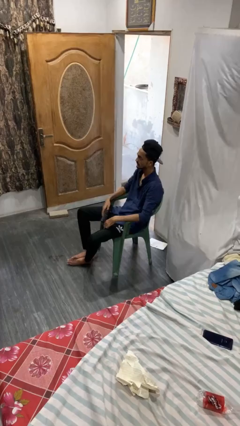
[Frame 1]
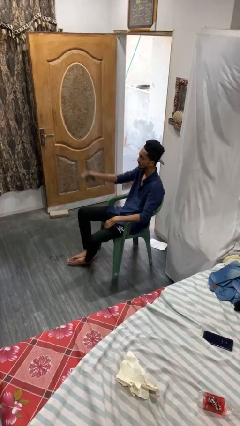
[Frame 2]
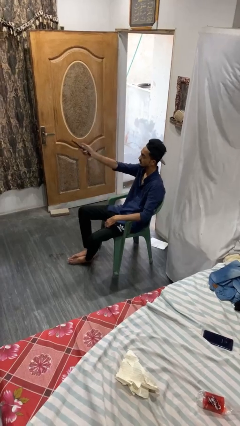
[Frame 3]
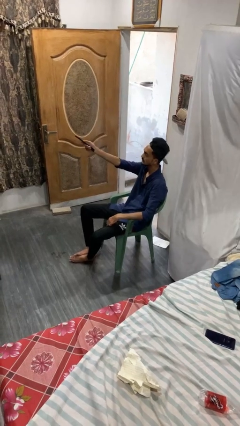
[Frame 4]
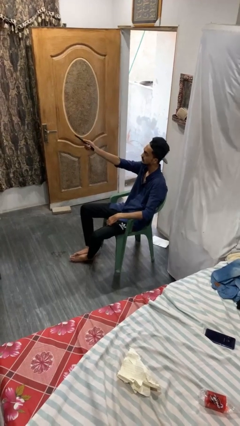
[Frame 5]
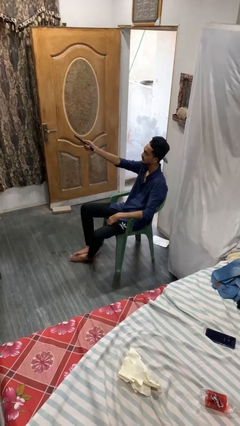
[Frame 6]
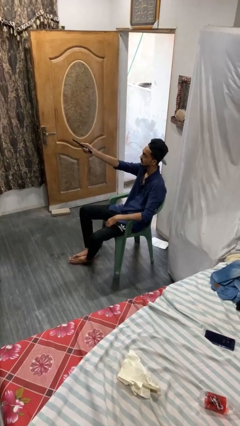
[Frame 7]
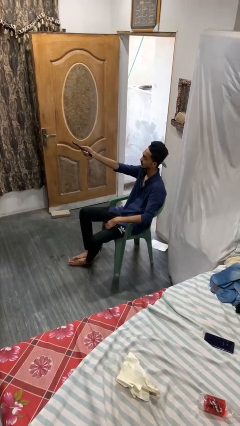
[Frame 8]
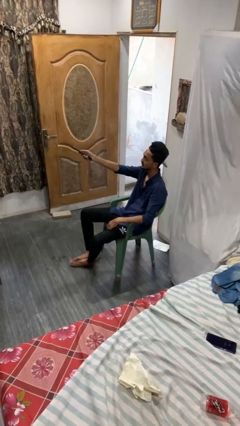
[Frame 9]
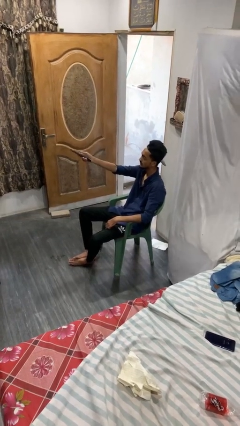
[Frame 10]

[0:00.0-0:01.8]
person uses television remote

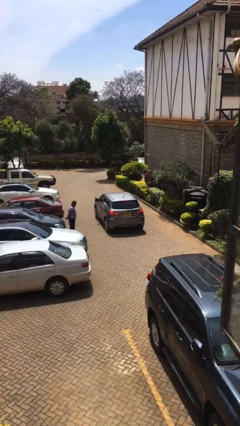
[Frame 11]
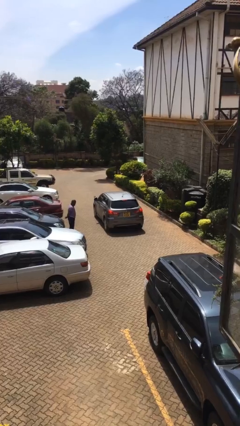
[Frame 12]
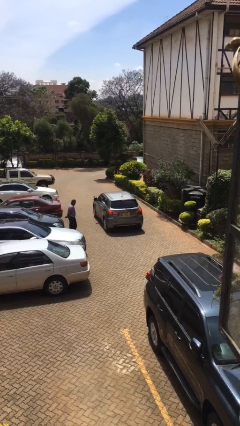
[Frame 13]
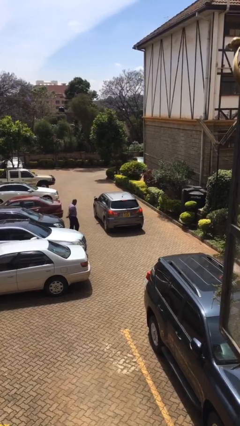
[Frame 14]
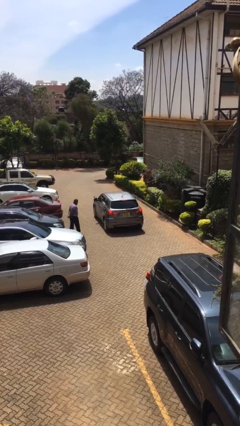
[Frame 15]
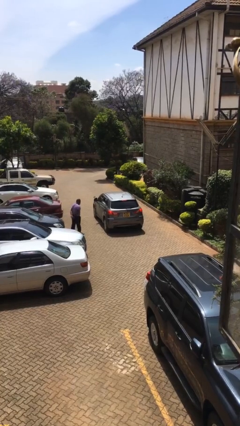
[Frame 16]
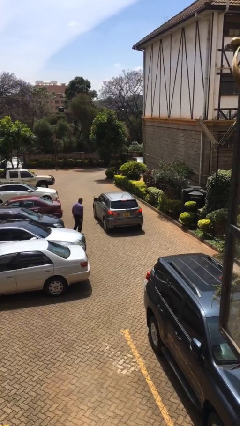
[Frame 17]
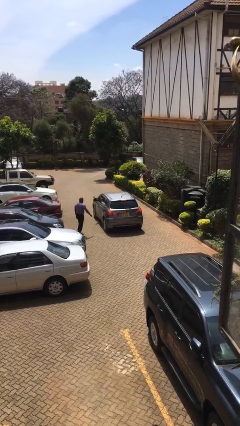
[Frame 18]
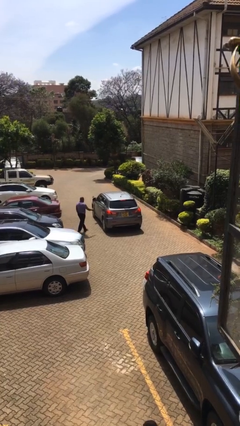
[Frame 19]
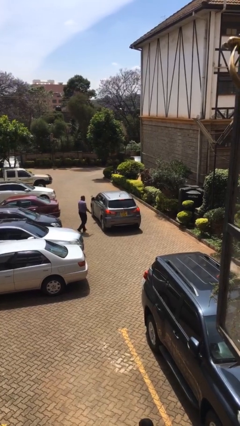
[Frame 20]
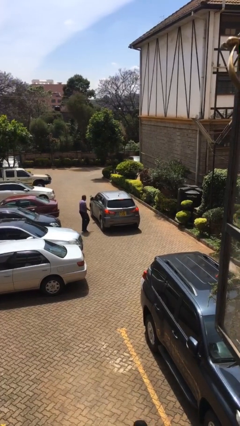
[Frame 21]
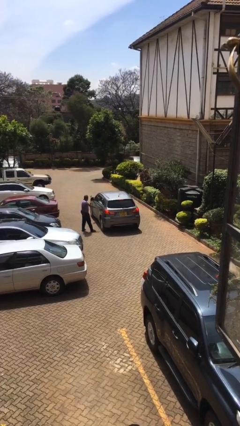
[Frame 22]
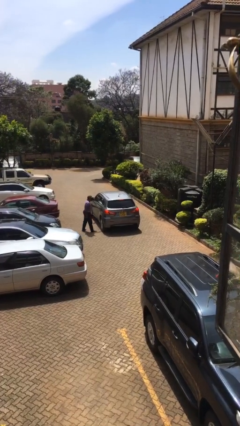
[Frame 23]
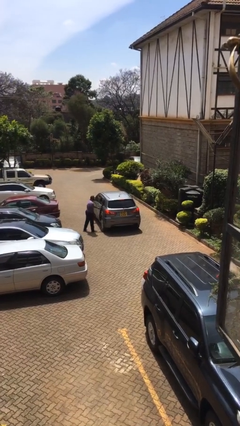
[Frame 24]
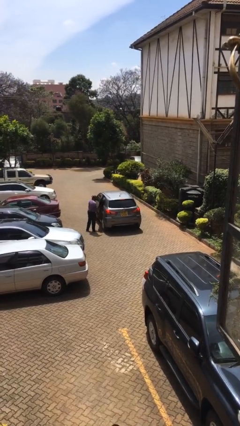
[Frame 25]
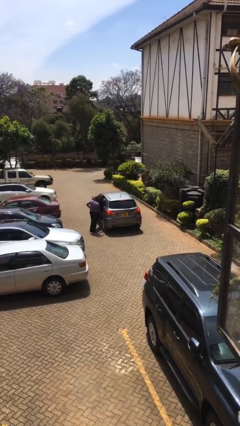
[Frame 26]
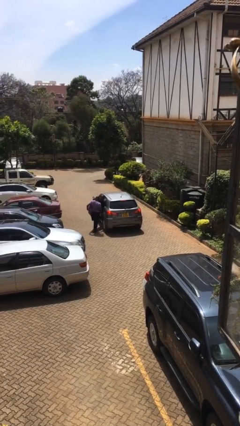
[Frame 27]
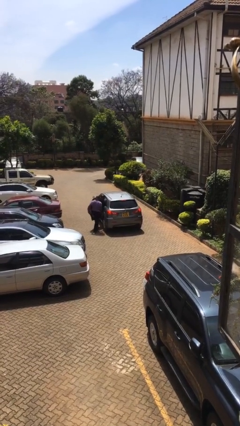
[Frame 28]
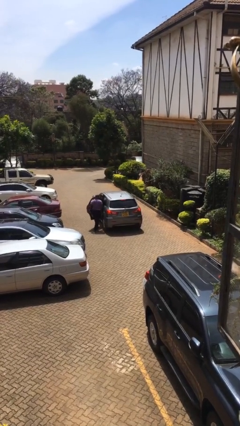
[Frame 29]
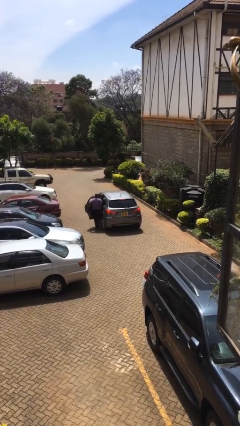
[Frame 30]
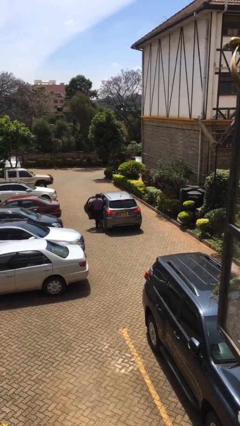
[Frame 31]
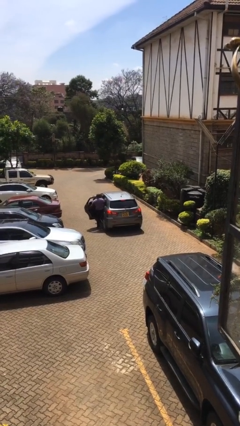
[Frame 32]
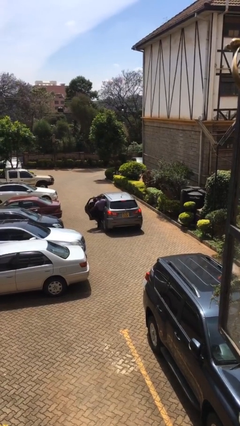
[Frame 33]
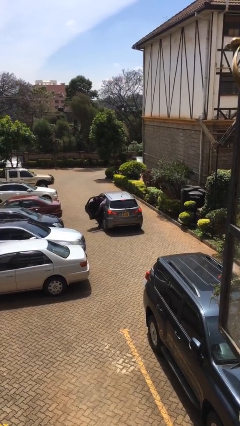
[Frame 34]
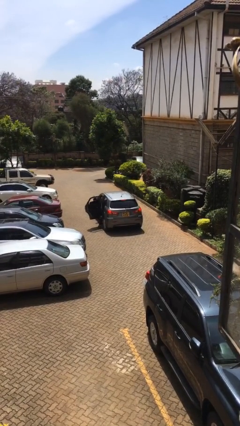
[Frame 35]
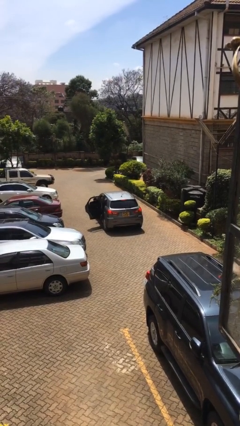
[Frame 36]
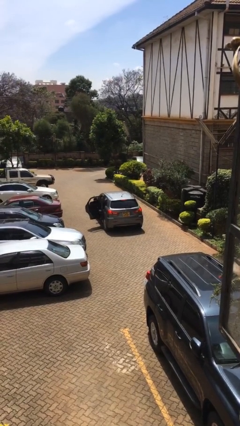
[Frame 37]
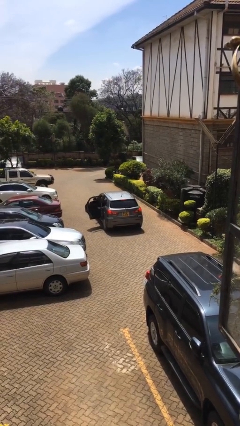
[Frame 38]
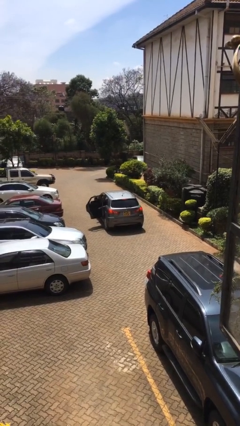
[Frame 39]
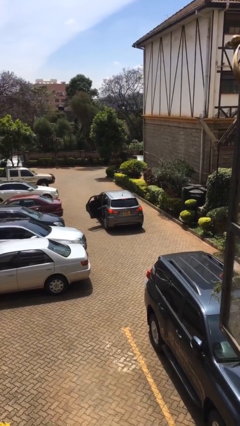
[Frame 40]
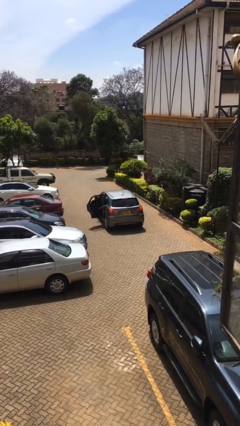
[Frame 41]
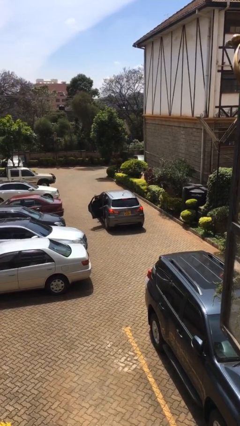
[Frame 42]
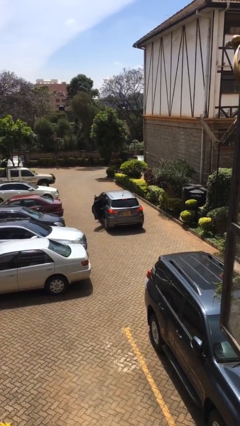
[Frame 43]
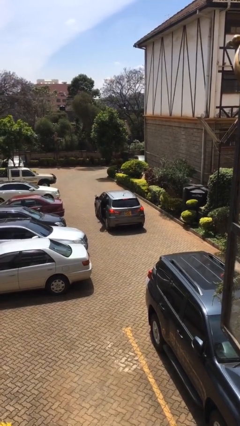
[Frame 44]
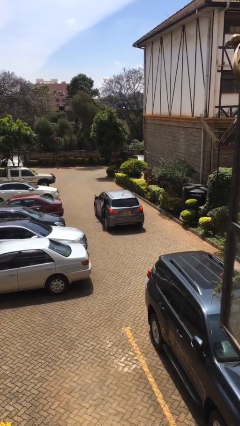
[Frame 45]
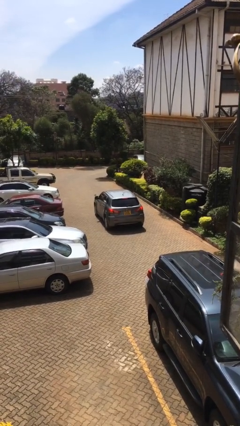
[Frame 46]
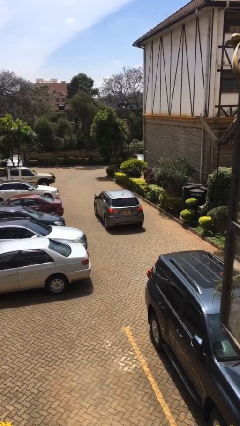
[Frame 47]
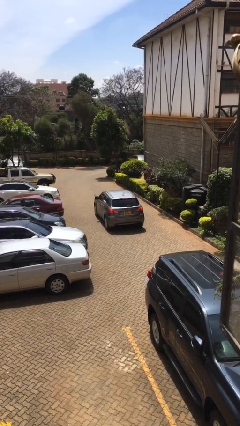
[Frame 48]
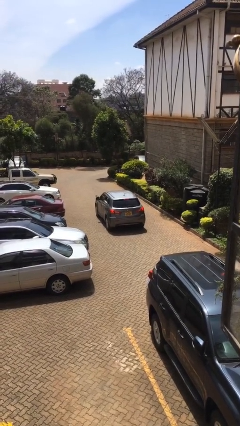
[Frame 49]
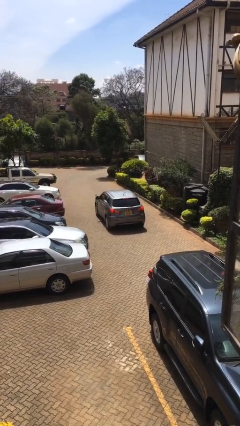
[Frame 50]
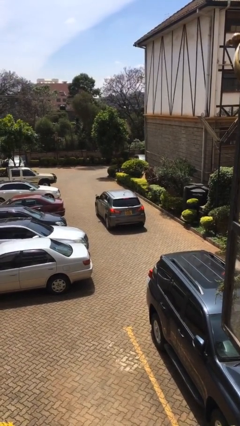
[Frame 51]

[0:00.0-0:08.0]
car picks up person

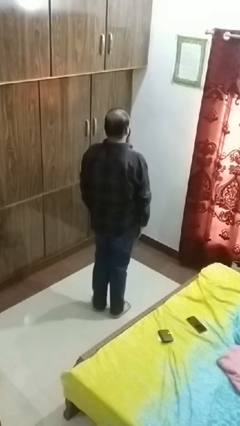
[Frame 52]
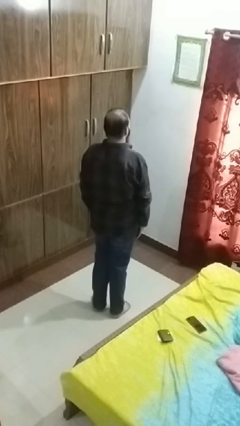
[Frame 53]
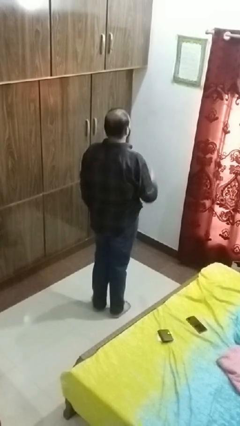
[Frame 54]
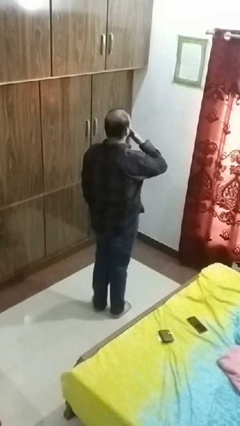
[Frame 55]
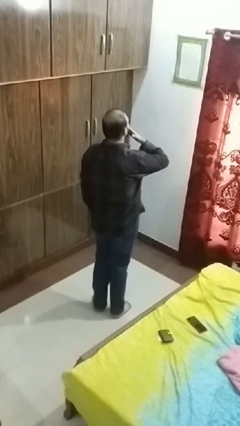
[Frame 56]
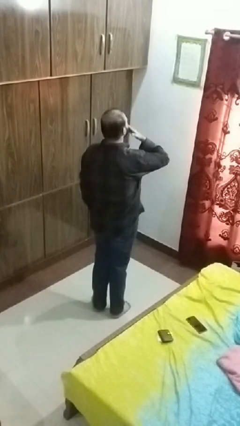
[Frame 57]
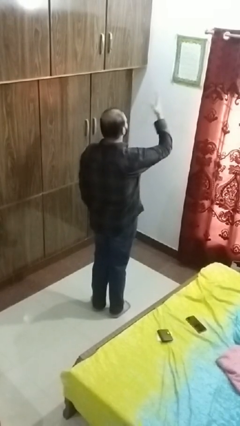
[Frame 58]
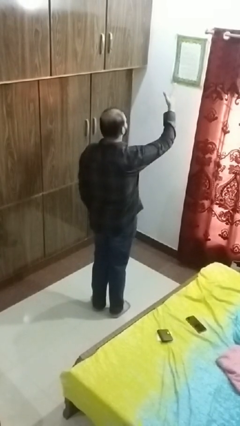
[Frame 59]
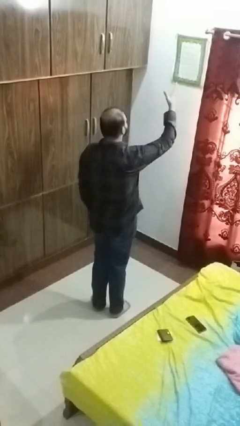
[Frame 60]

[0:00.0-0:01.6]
person gestures blow kiss

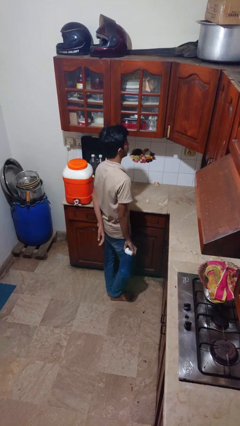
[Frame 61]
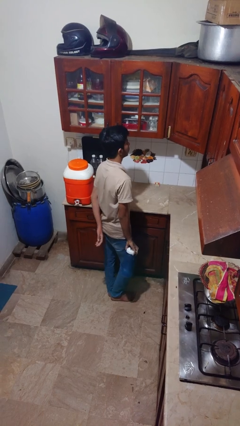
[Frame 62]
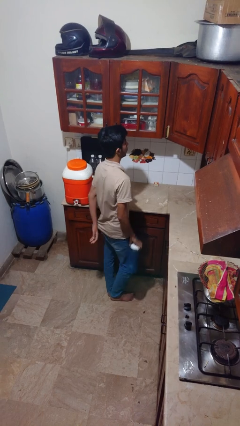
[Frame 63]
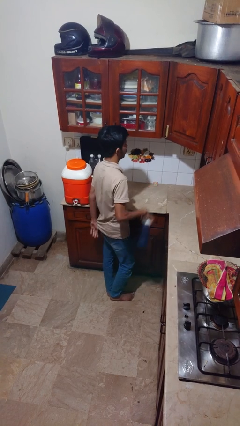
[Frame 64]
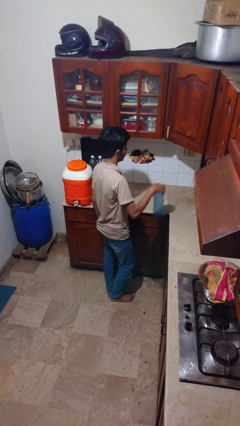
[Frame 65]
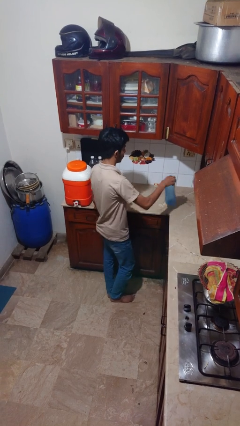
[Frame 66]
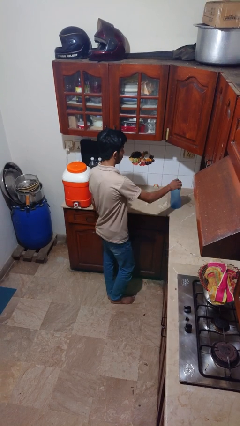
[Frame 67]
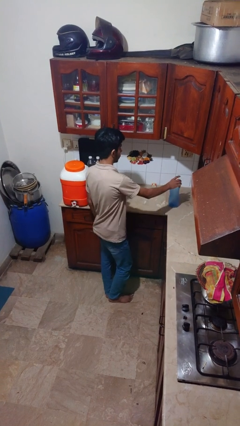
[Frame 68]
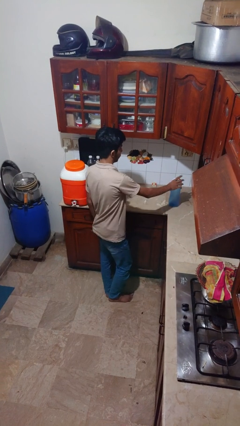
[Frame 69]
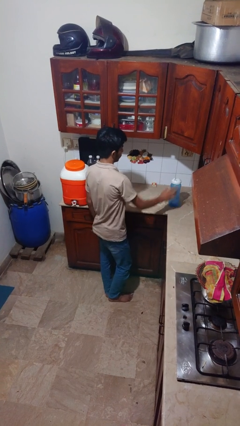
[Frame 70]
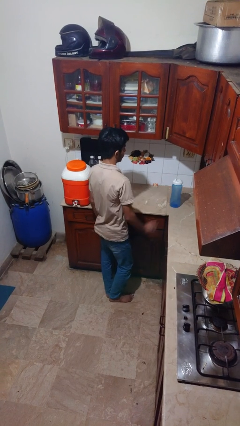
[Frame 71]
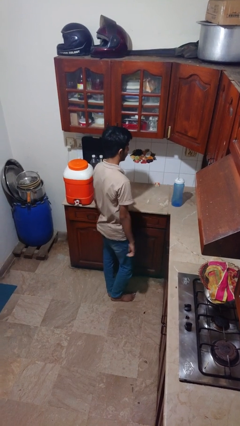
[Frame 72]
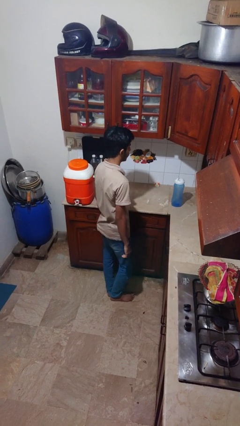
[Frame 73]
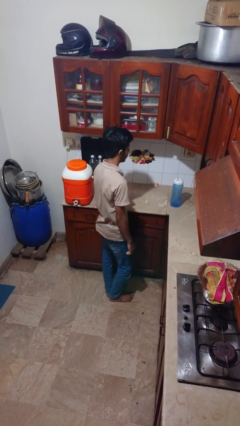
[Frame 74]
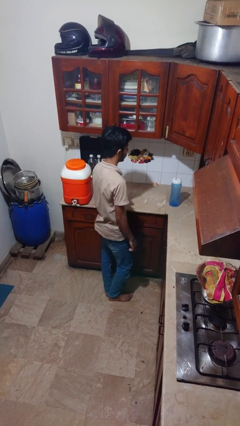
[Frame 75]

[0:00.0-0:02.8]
person puts down object on countertop

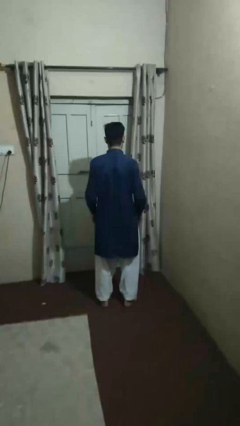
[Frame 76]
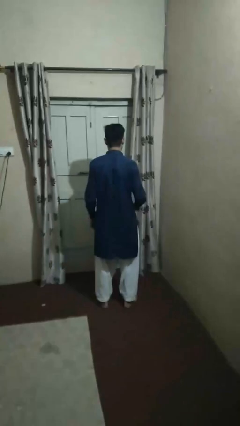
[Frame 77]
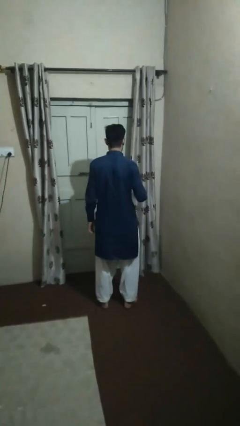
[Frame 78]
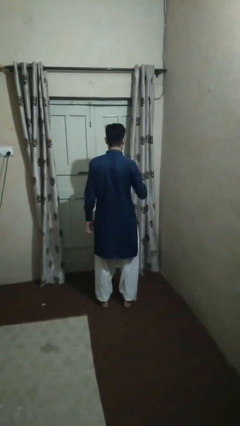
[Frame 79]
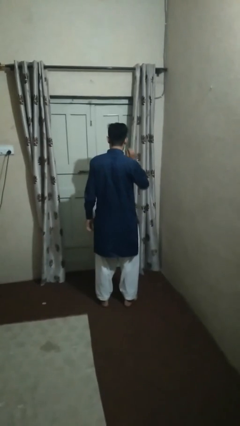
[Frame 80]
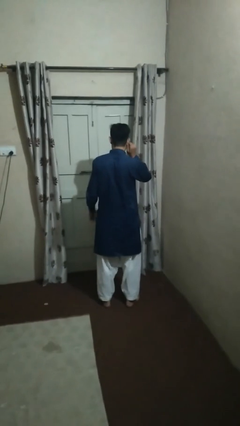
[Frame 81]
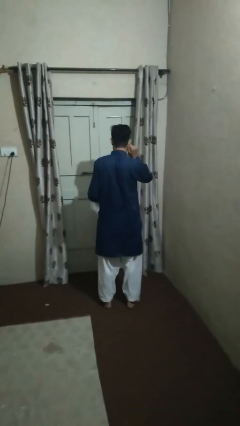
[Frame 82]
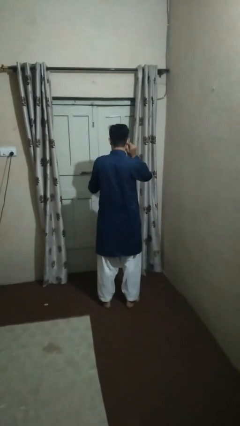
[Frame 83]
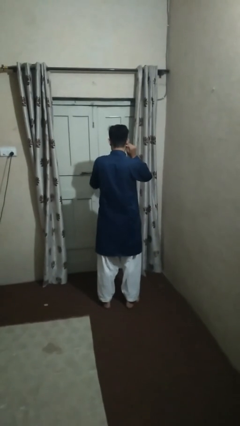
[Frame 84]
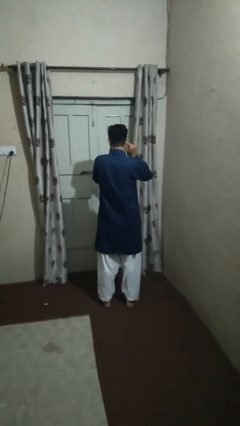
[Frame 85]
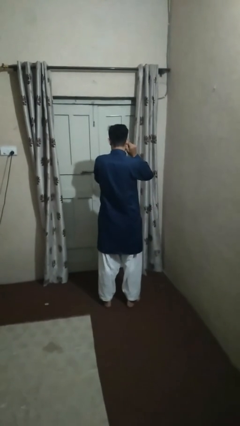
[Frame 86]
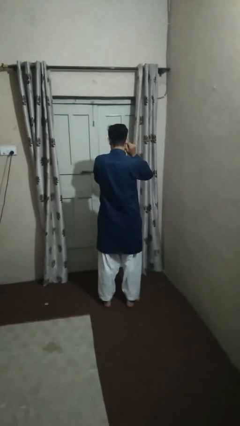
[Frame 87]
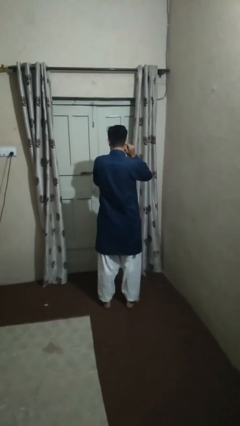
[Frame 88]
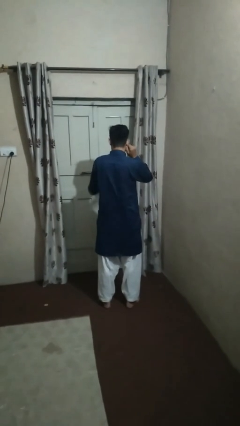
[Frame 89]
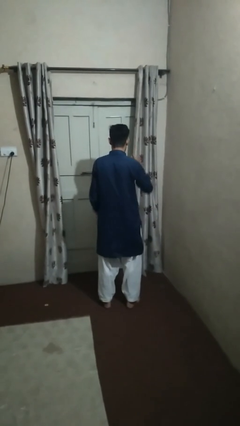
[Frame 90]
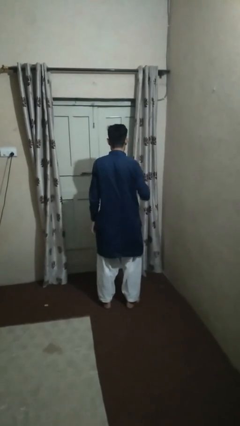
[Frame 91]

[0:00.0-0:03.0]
person touches earlobe
